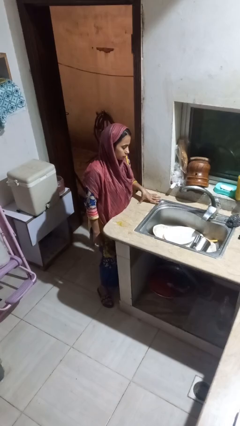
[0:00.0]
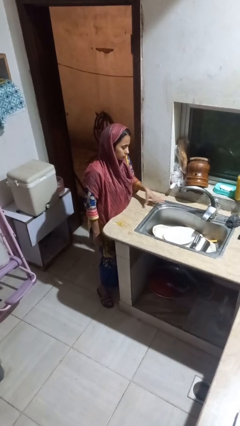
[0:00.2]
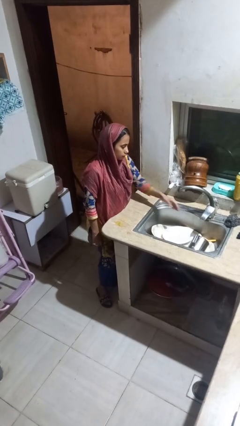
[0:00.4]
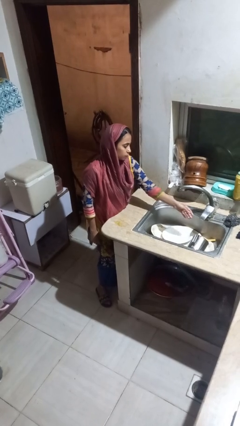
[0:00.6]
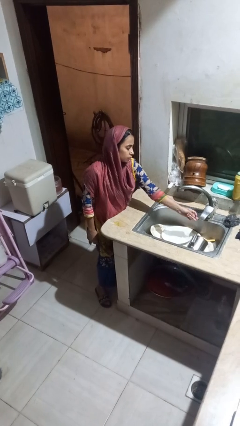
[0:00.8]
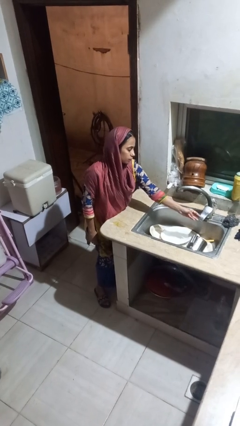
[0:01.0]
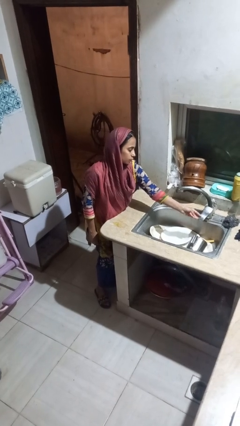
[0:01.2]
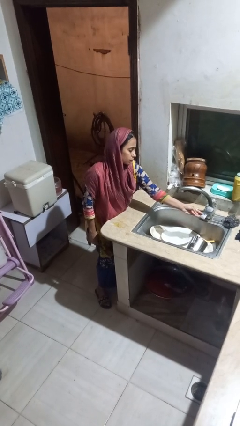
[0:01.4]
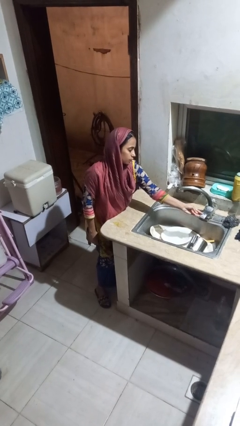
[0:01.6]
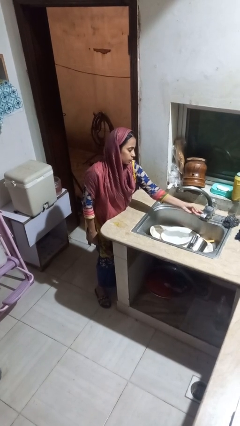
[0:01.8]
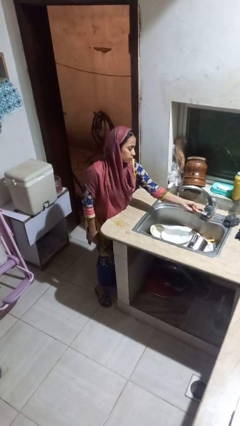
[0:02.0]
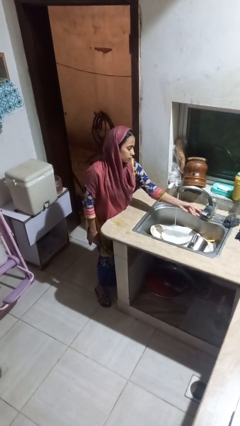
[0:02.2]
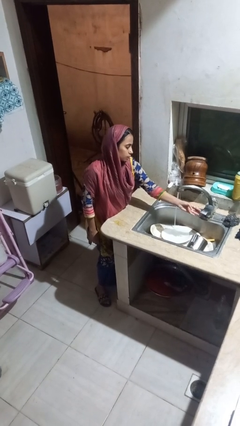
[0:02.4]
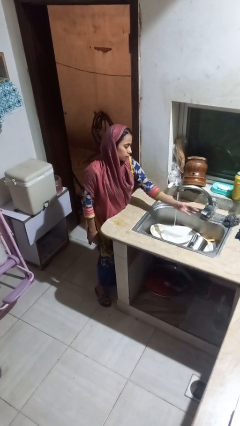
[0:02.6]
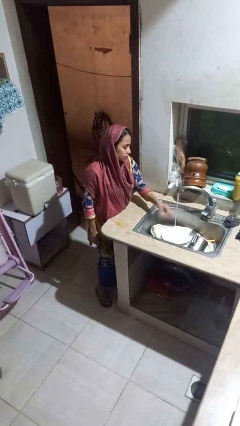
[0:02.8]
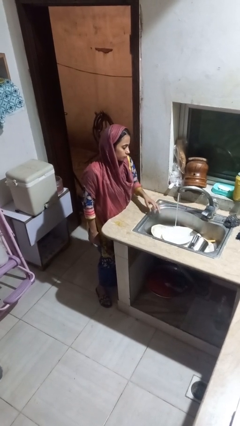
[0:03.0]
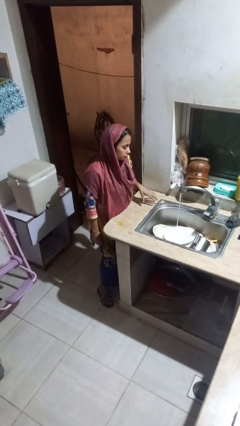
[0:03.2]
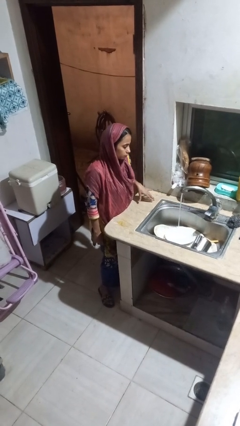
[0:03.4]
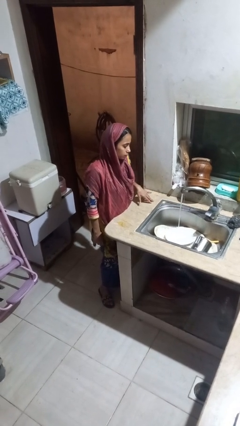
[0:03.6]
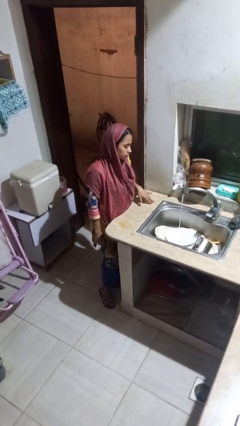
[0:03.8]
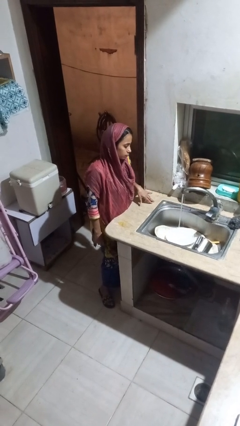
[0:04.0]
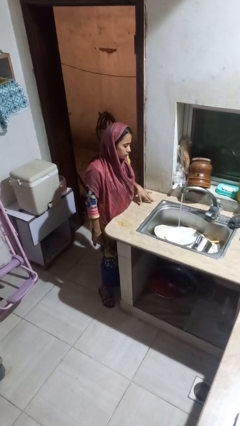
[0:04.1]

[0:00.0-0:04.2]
person turns on faucet

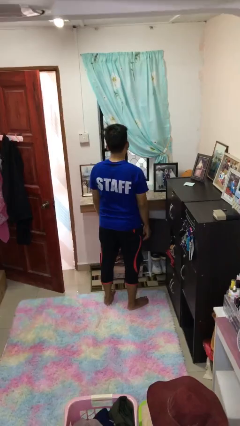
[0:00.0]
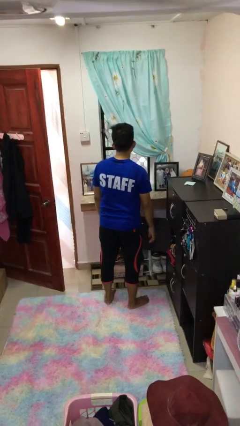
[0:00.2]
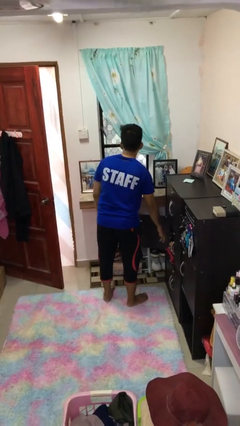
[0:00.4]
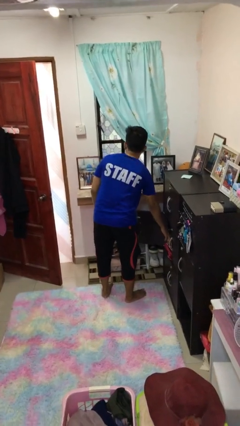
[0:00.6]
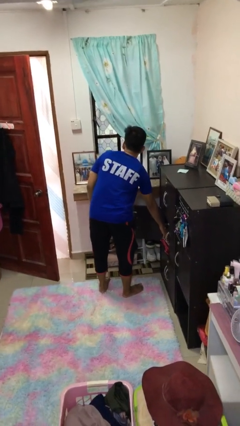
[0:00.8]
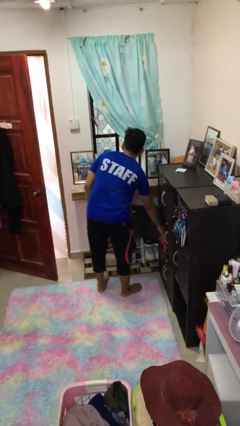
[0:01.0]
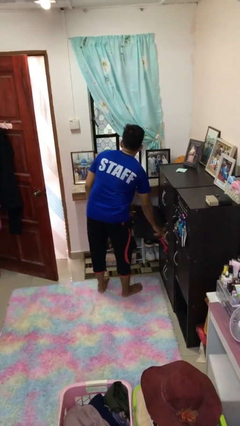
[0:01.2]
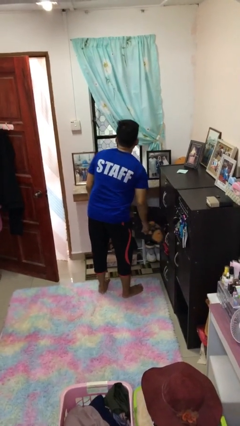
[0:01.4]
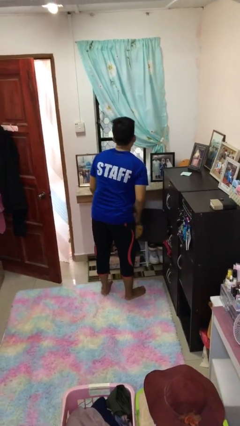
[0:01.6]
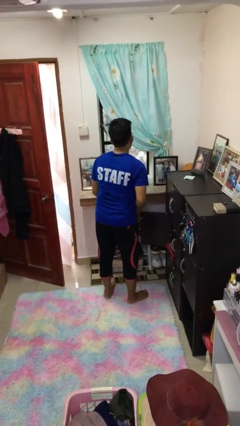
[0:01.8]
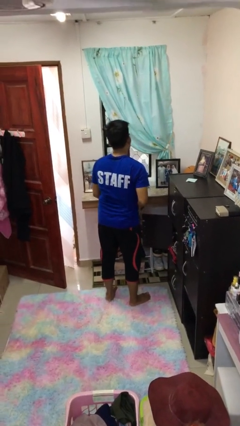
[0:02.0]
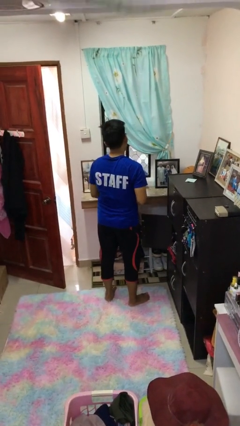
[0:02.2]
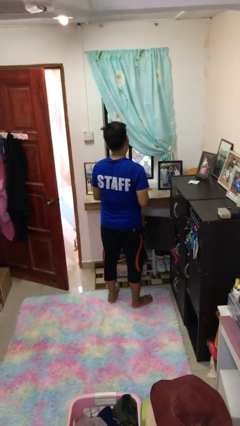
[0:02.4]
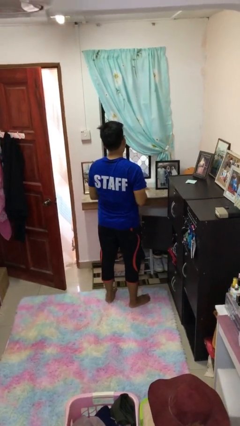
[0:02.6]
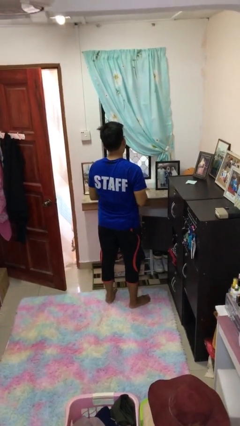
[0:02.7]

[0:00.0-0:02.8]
person picks up object from cabinet

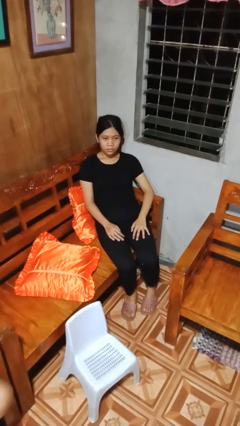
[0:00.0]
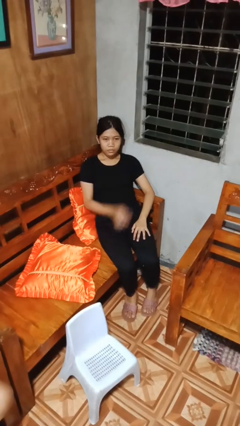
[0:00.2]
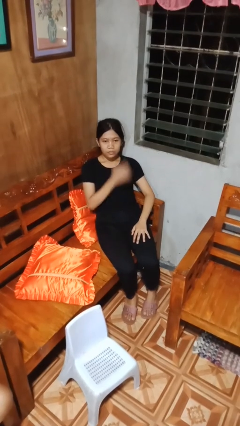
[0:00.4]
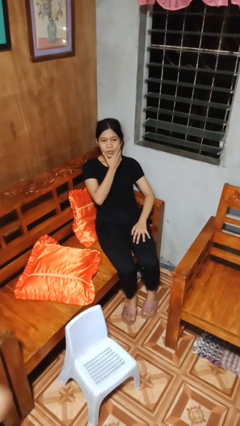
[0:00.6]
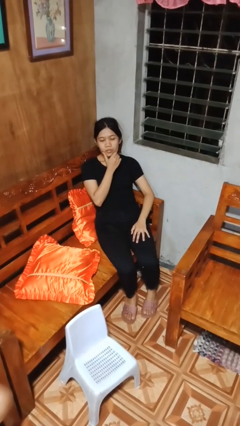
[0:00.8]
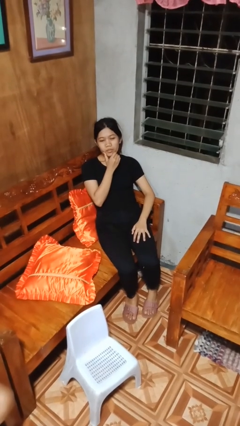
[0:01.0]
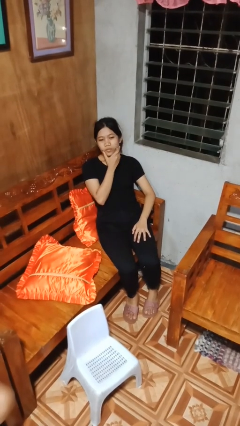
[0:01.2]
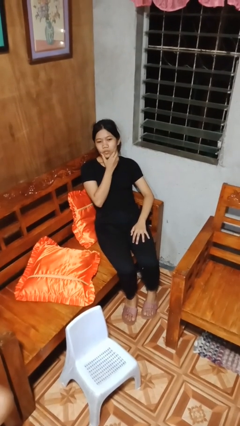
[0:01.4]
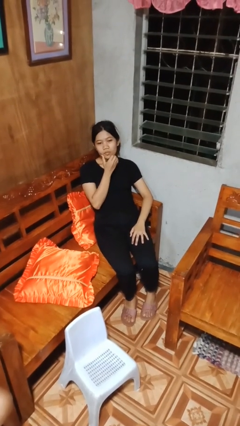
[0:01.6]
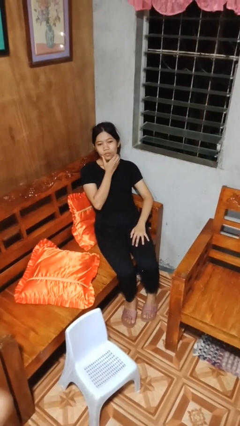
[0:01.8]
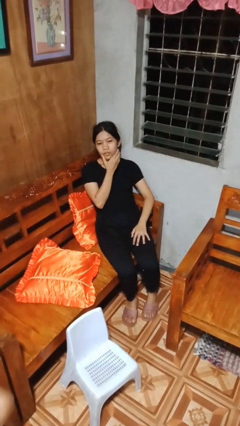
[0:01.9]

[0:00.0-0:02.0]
person strokes chin

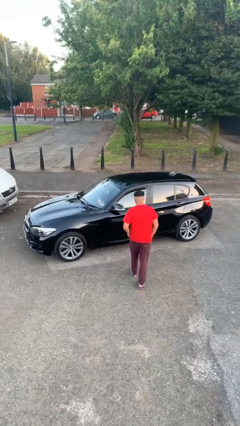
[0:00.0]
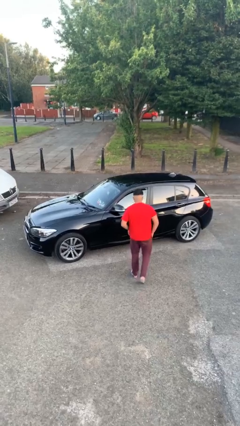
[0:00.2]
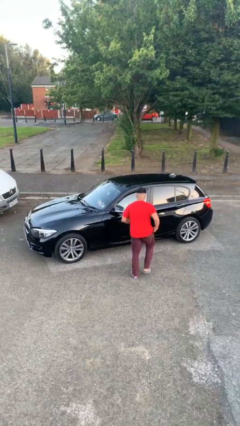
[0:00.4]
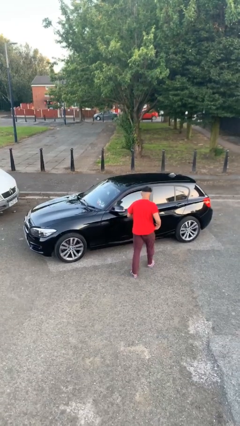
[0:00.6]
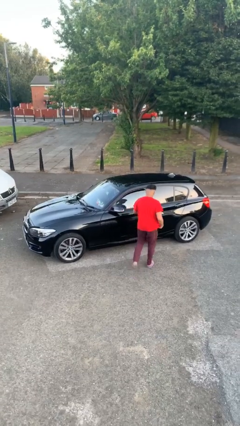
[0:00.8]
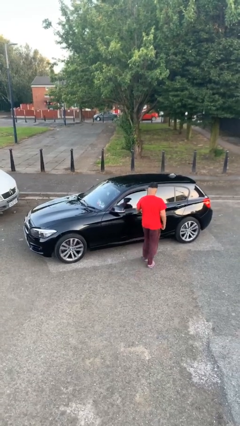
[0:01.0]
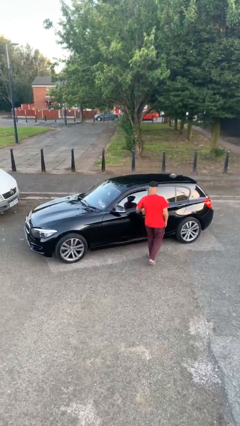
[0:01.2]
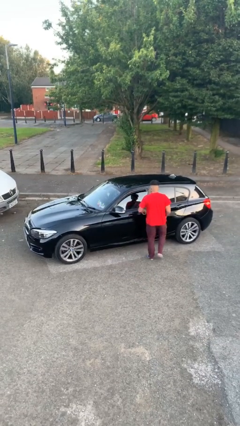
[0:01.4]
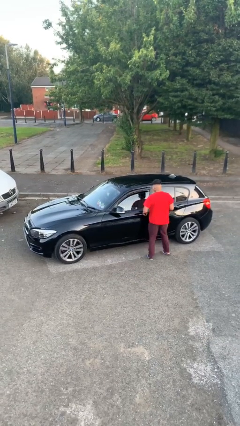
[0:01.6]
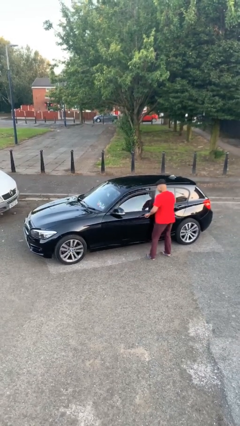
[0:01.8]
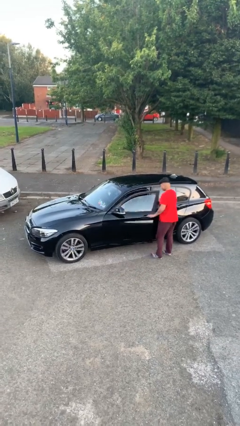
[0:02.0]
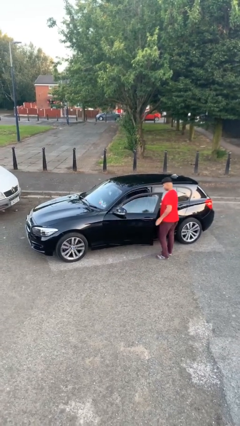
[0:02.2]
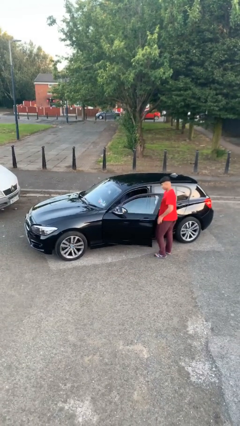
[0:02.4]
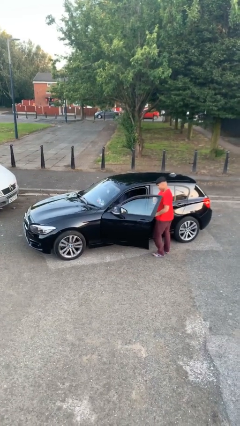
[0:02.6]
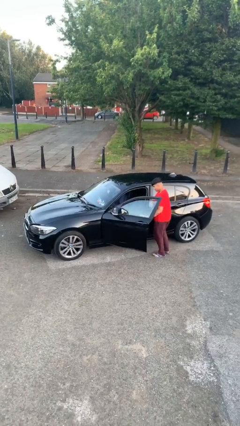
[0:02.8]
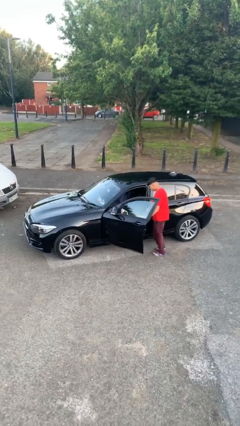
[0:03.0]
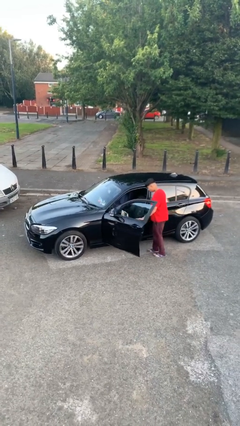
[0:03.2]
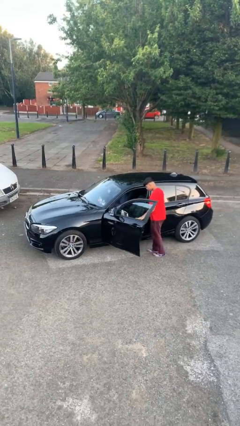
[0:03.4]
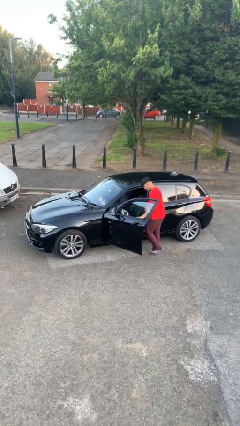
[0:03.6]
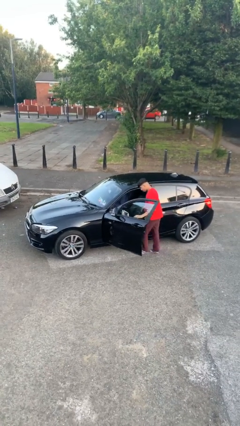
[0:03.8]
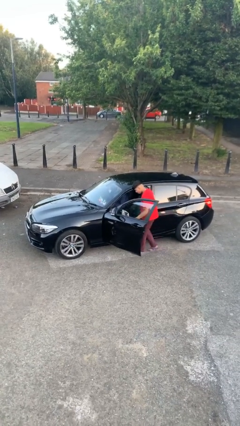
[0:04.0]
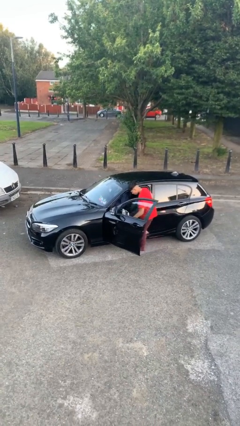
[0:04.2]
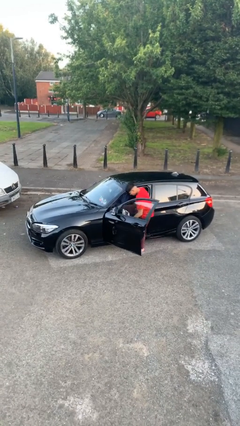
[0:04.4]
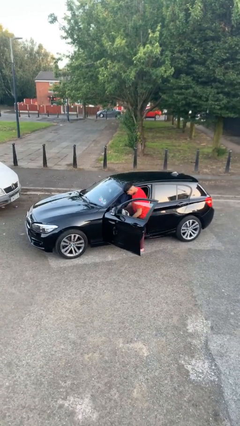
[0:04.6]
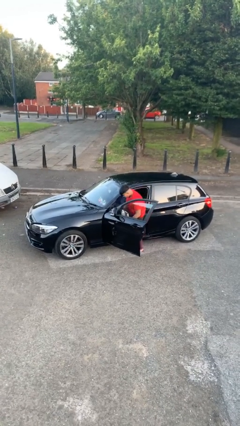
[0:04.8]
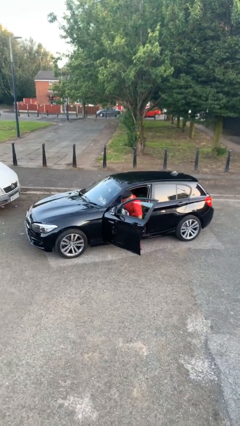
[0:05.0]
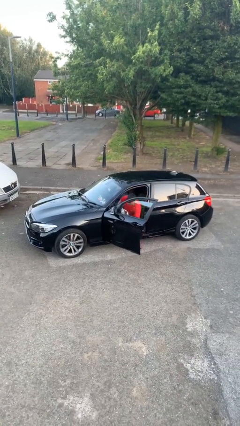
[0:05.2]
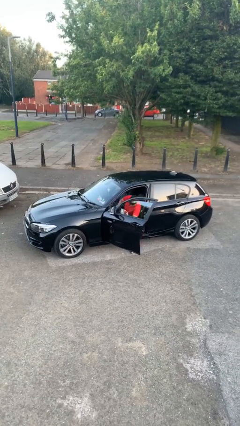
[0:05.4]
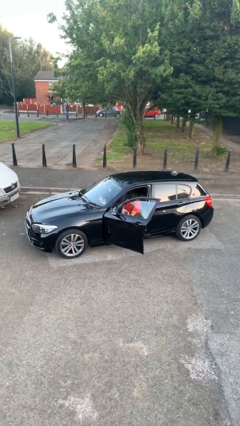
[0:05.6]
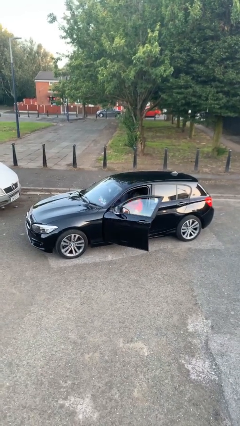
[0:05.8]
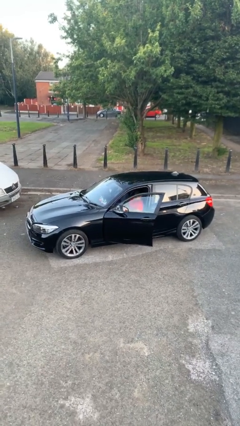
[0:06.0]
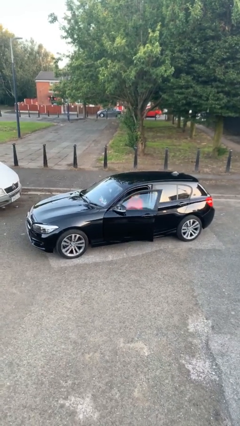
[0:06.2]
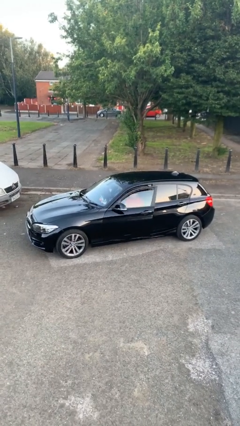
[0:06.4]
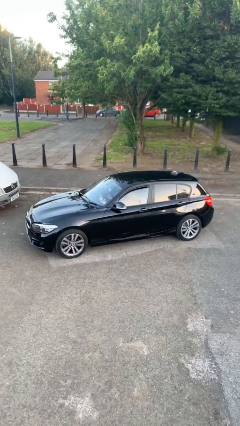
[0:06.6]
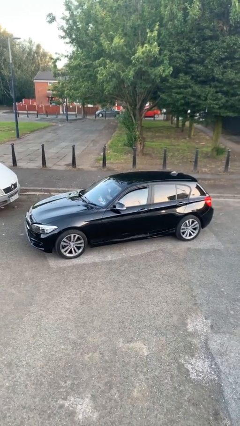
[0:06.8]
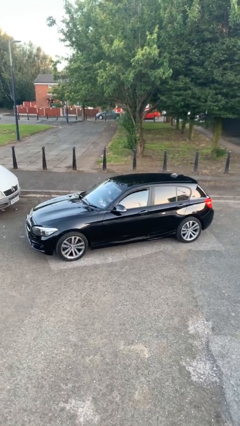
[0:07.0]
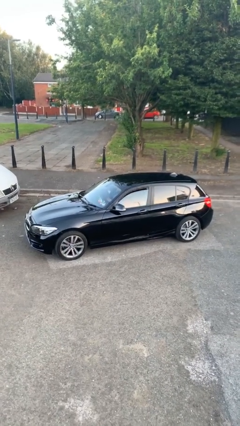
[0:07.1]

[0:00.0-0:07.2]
car picks up person

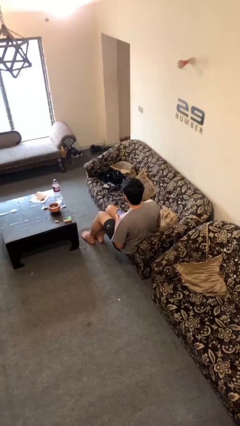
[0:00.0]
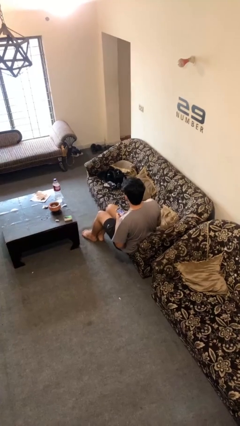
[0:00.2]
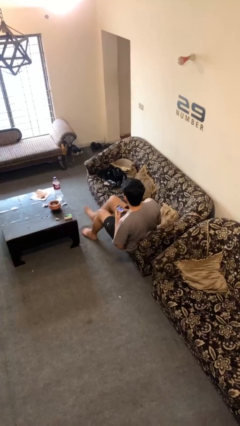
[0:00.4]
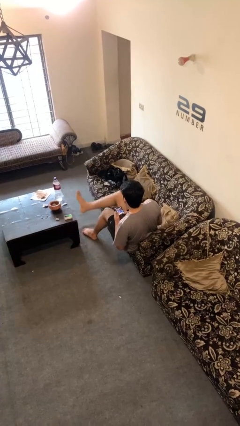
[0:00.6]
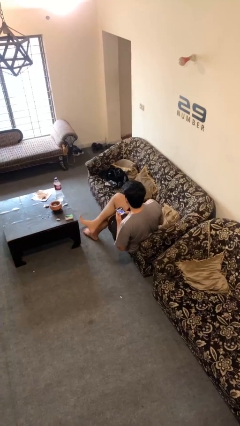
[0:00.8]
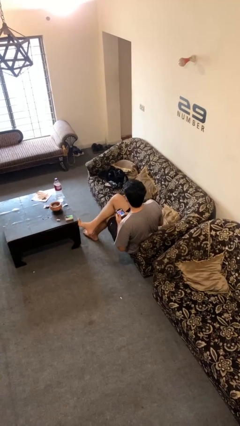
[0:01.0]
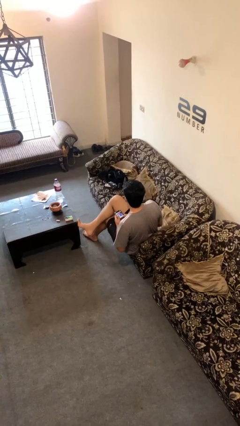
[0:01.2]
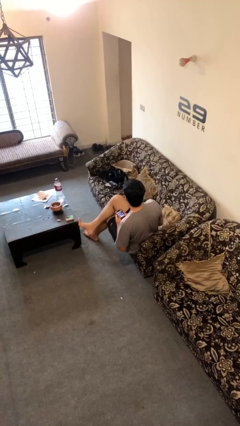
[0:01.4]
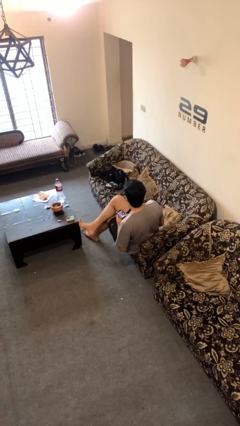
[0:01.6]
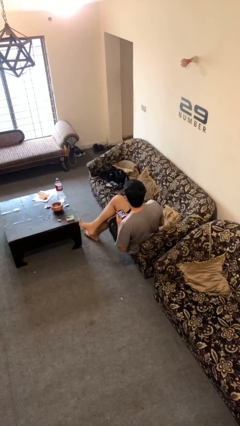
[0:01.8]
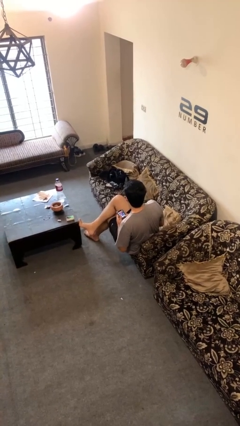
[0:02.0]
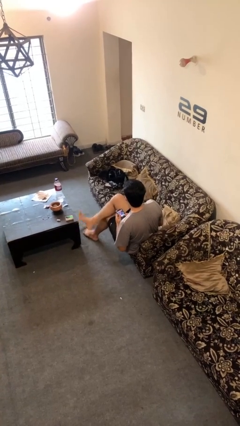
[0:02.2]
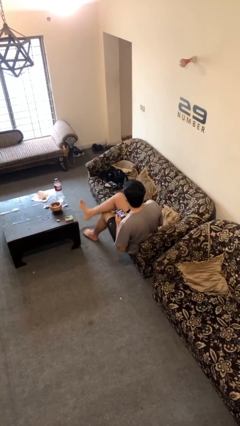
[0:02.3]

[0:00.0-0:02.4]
person crosses legs
